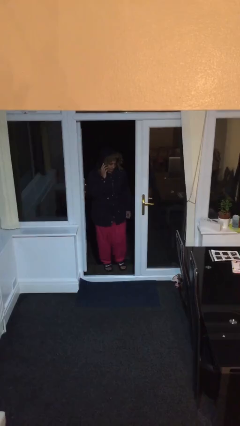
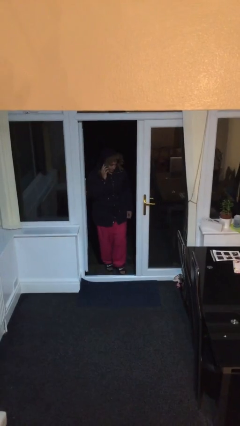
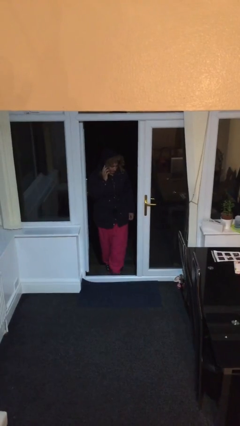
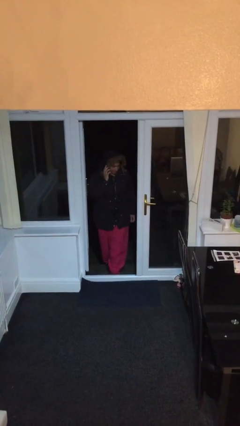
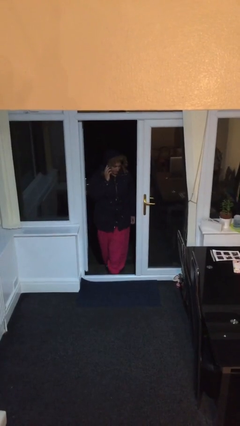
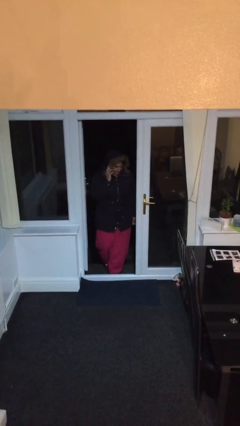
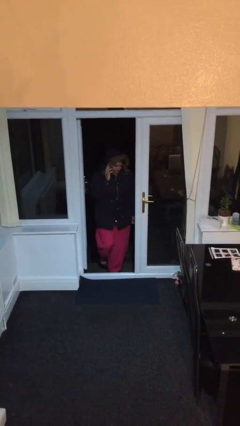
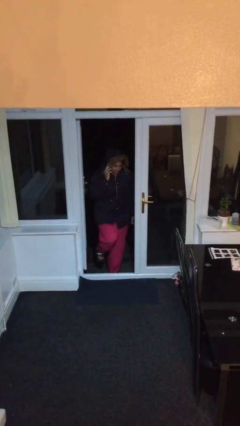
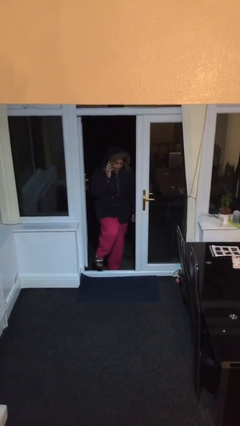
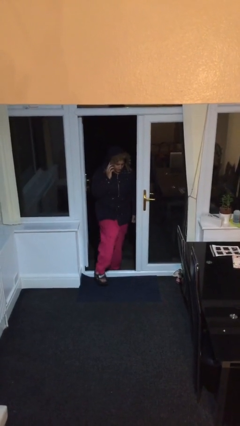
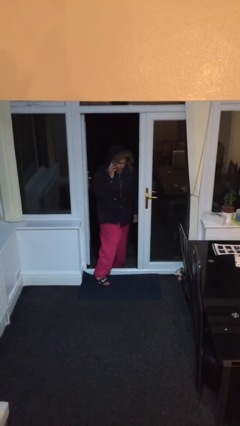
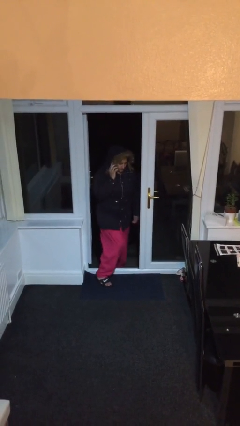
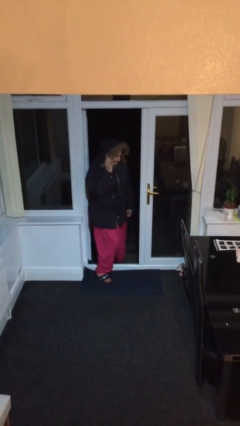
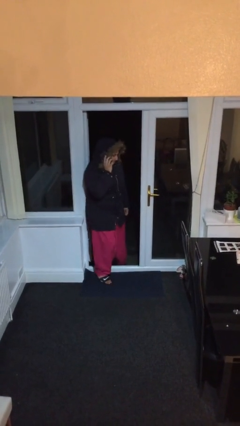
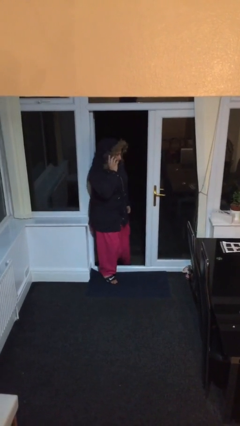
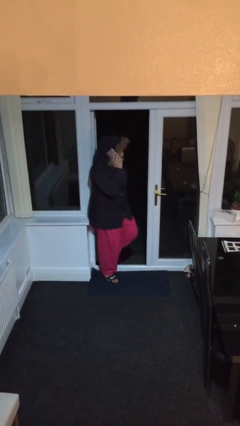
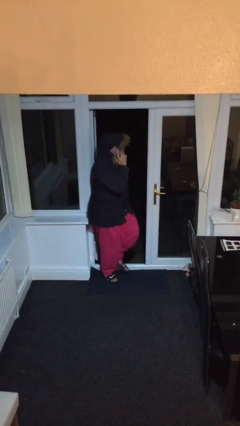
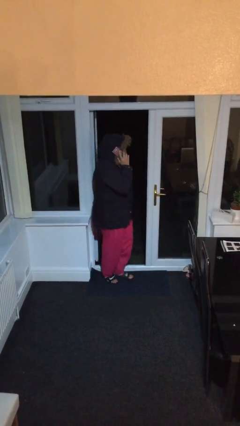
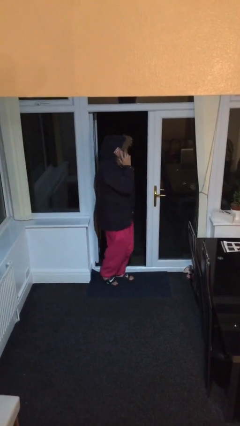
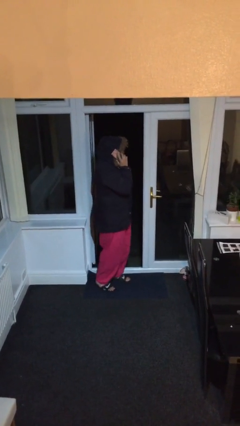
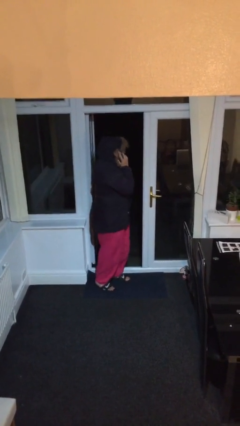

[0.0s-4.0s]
person enters scene through structure

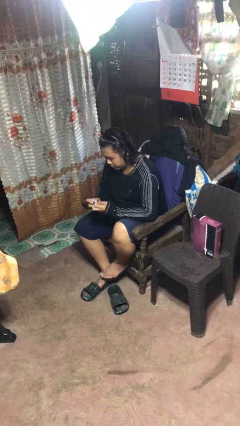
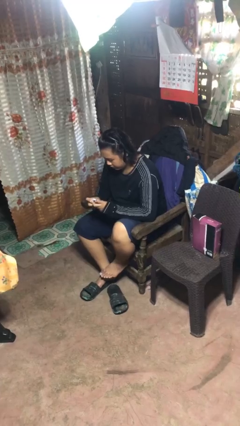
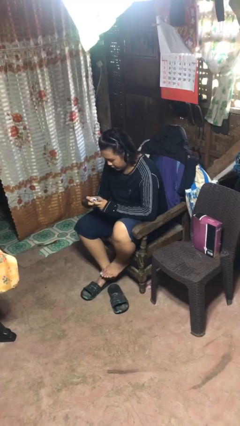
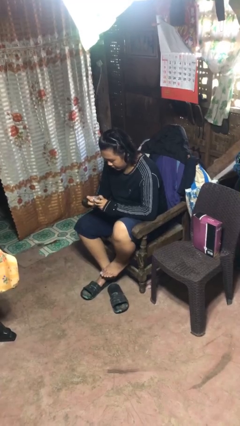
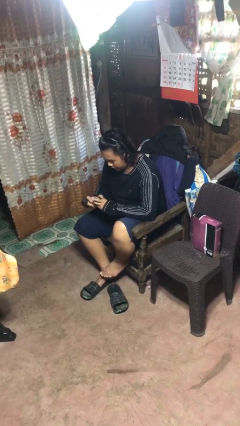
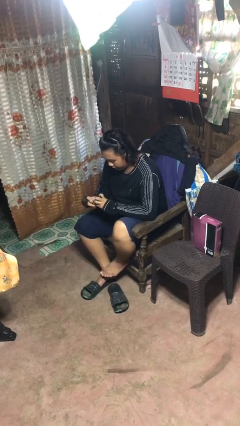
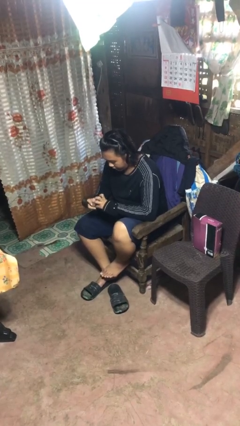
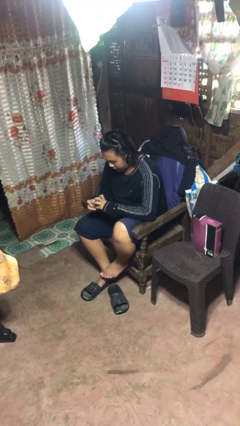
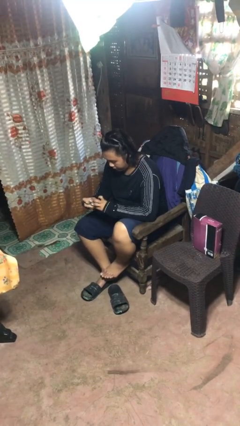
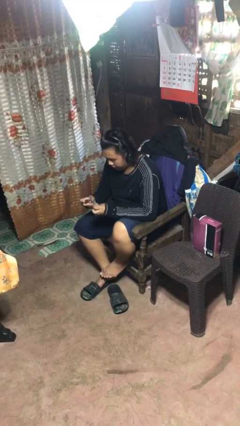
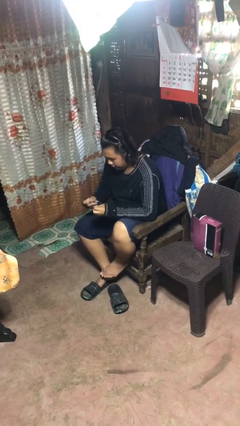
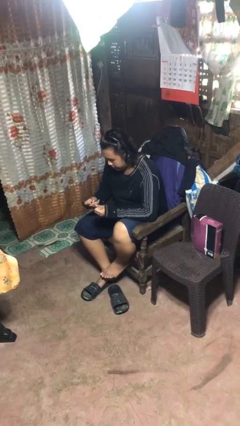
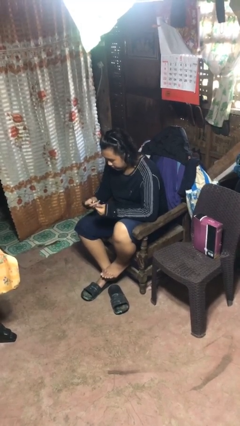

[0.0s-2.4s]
person files fingernails

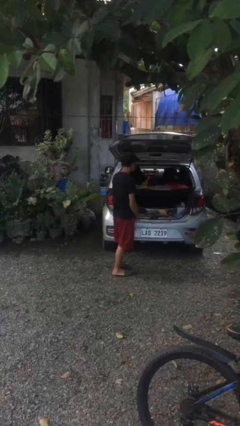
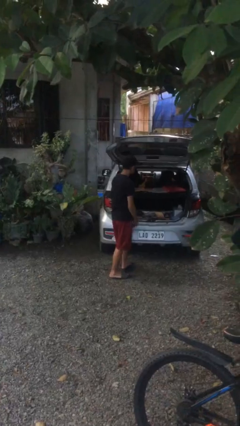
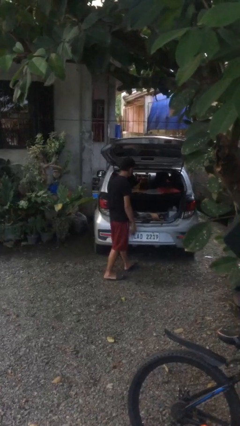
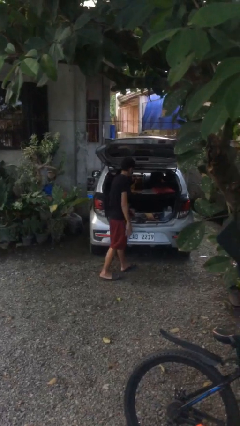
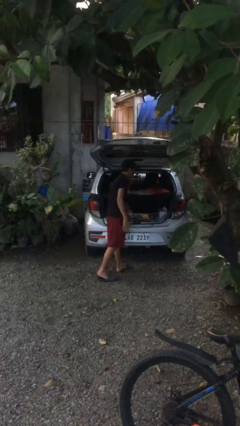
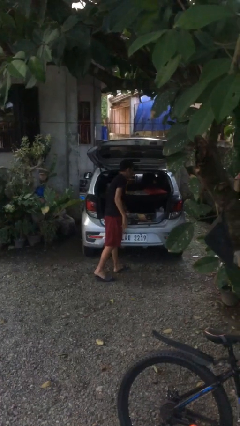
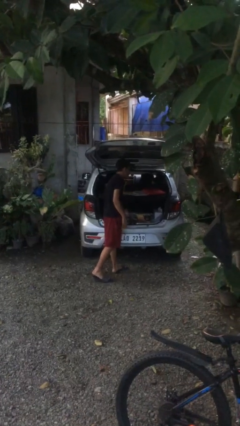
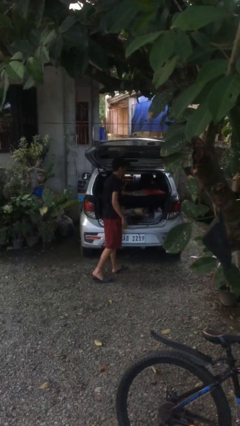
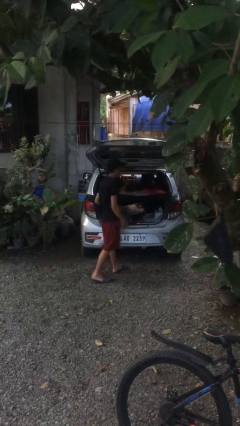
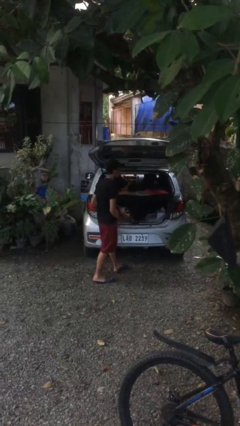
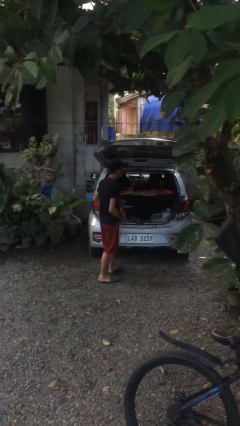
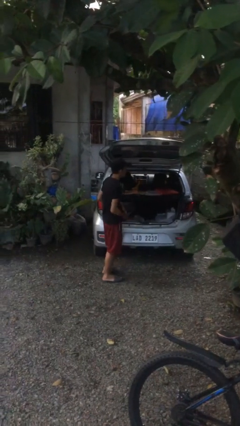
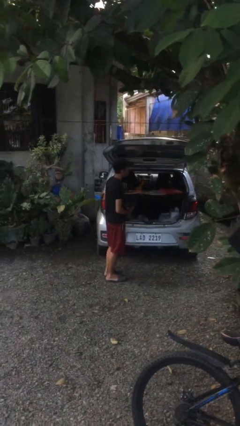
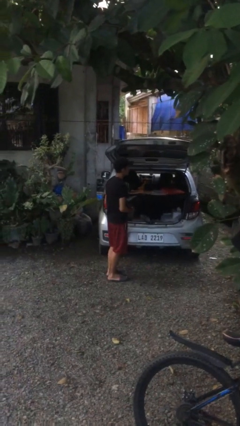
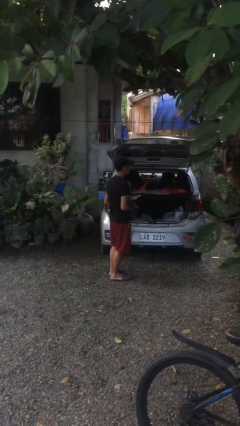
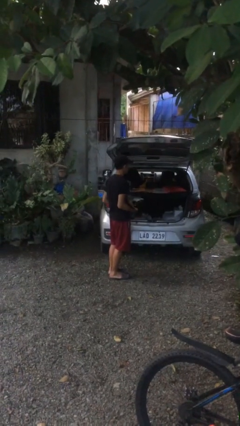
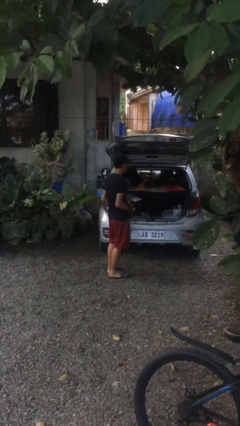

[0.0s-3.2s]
person unloads car

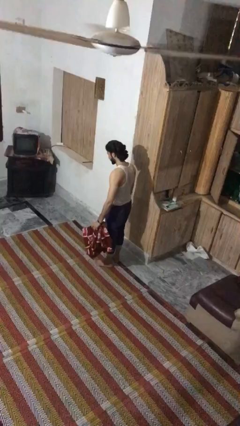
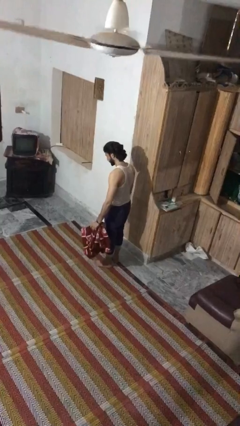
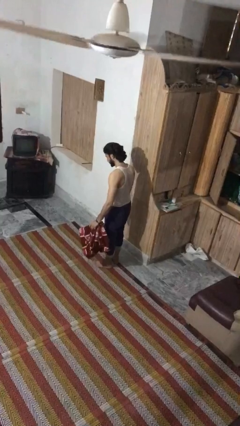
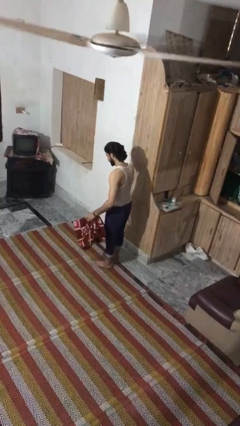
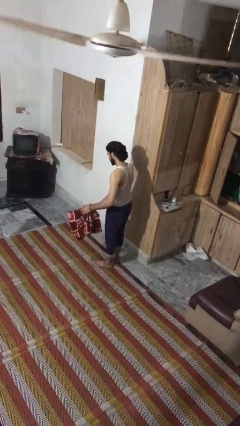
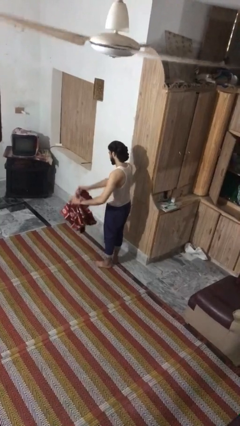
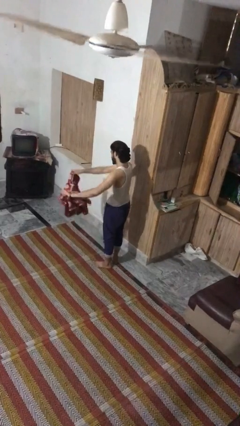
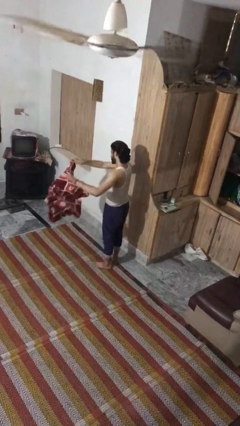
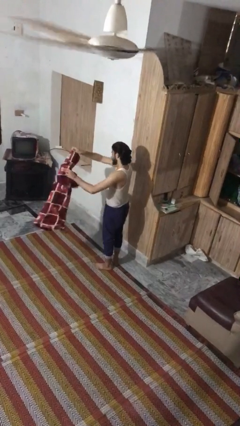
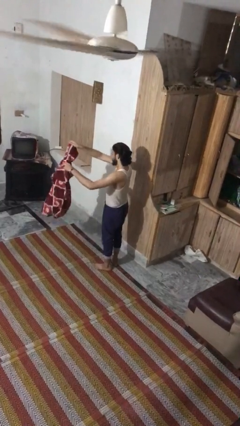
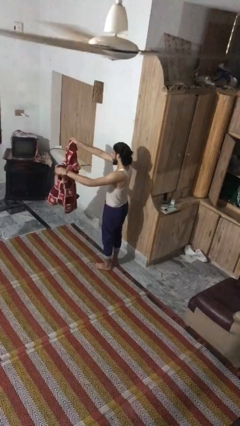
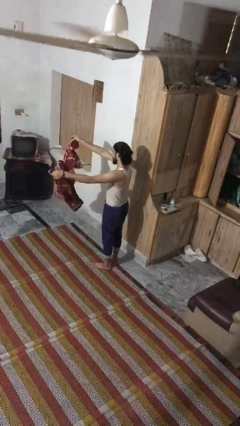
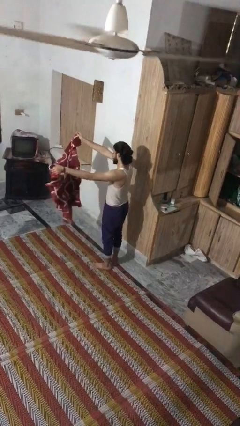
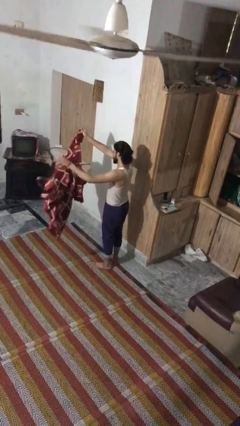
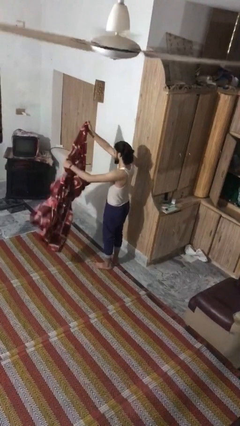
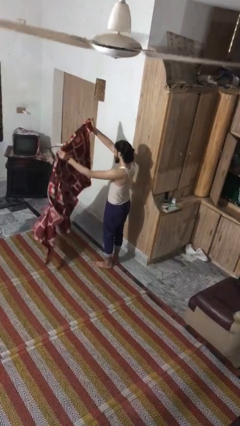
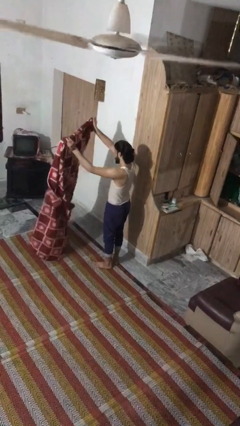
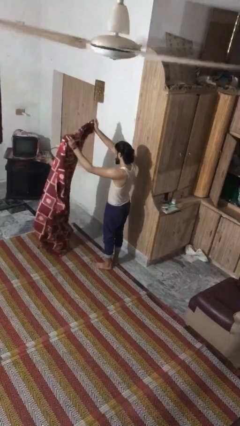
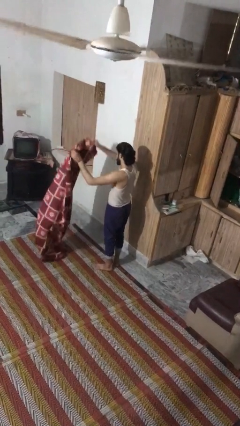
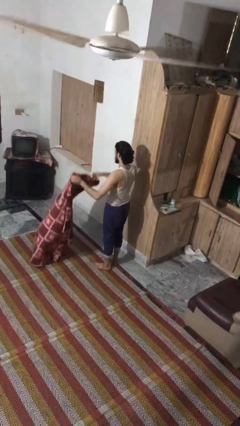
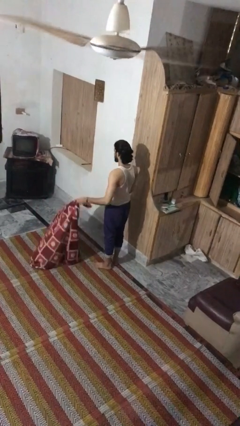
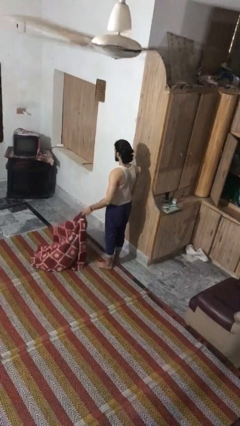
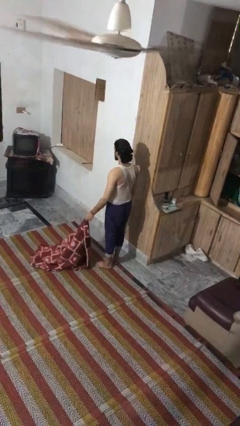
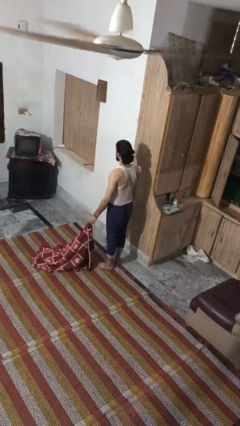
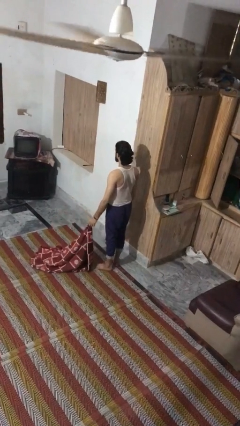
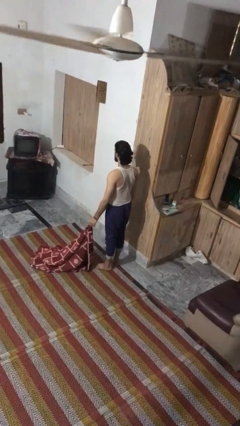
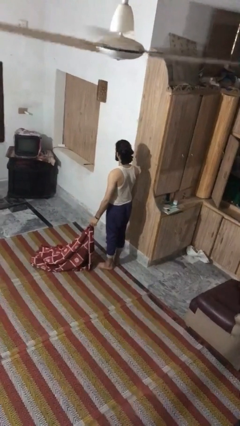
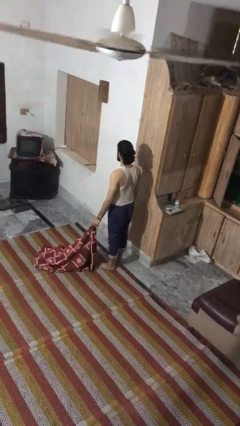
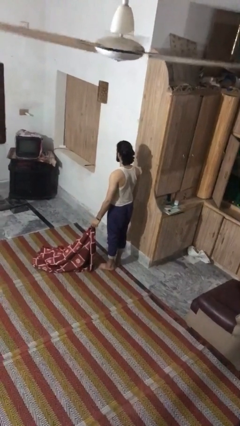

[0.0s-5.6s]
person unfolds blanket

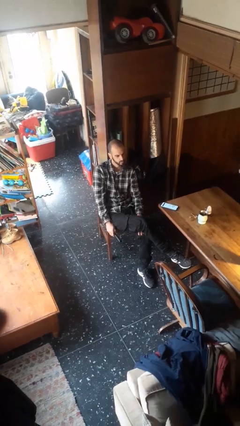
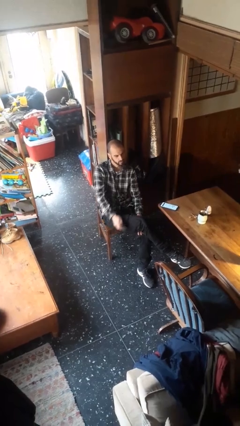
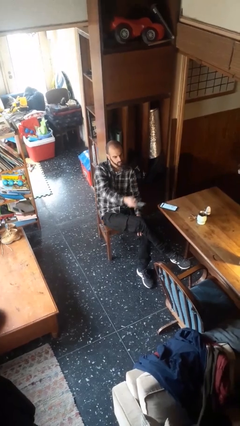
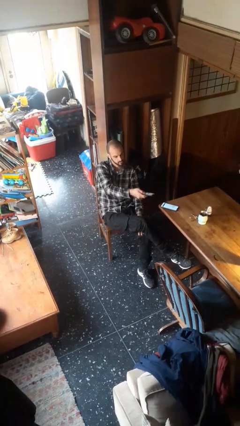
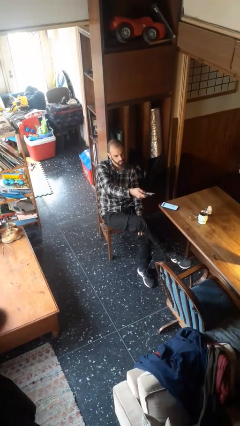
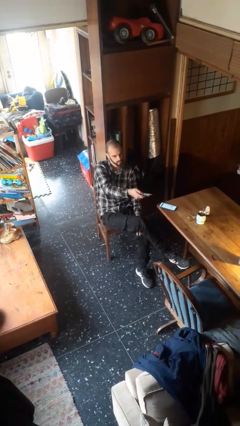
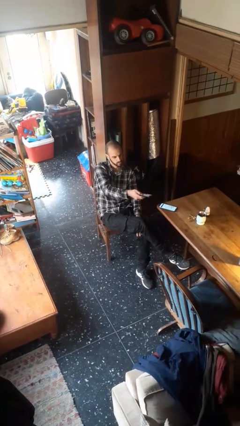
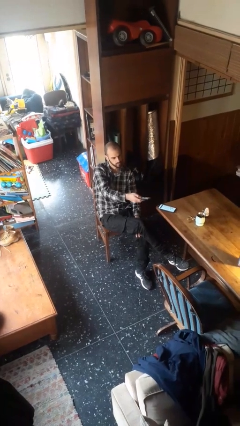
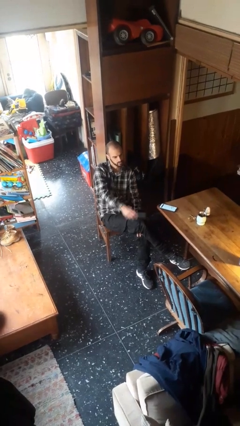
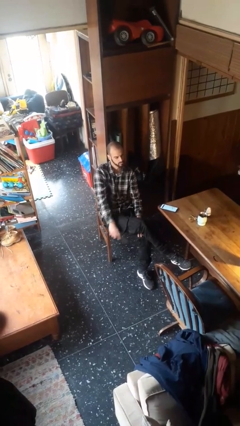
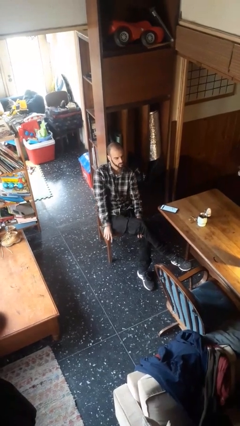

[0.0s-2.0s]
person uses television remote

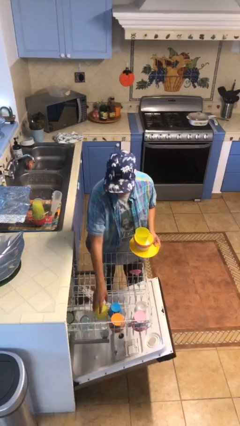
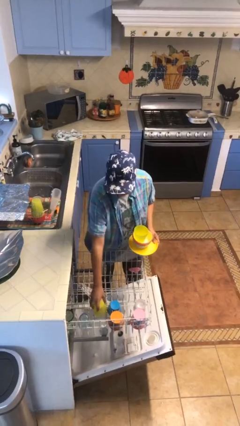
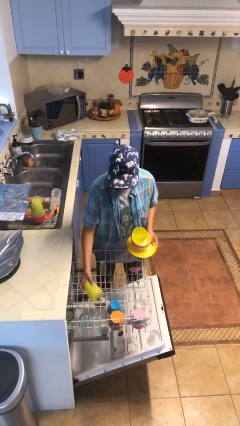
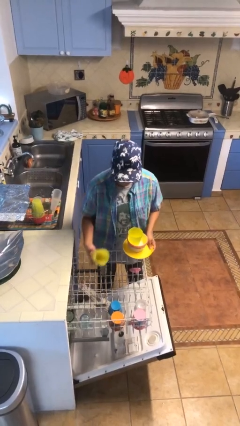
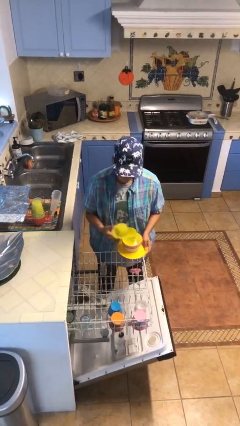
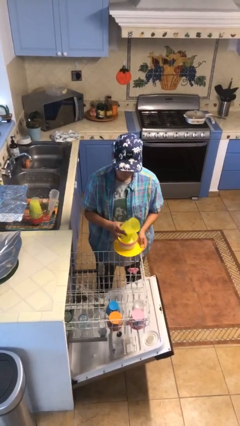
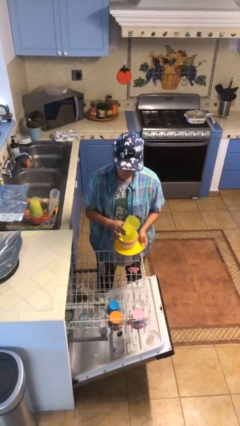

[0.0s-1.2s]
person unloads dishwasher
